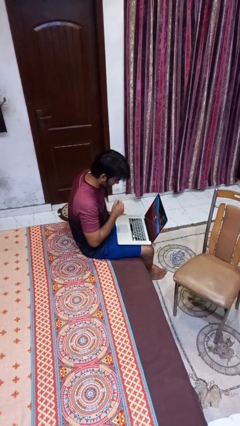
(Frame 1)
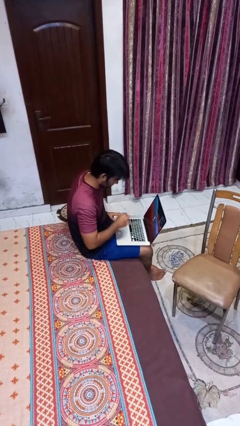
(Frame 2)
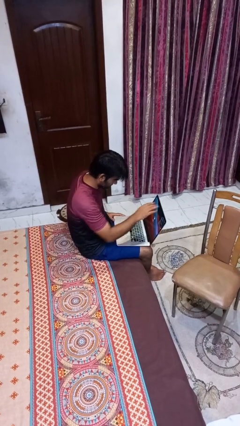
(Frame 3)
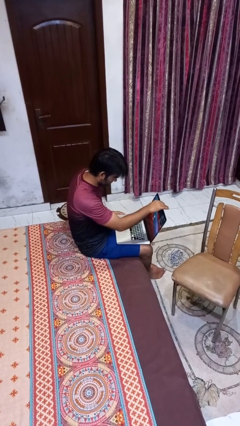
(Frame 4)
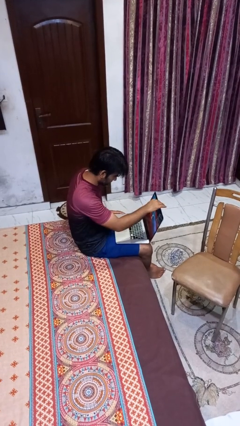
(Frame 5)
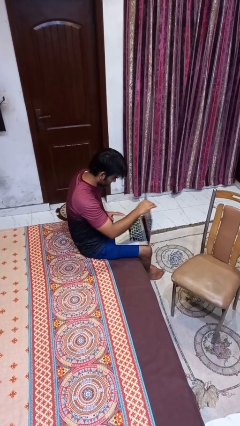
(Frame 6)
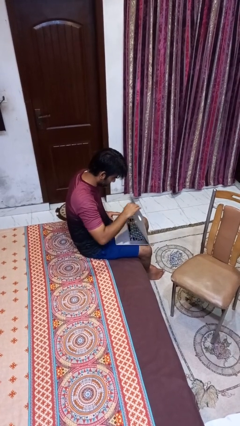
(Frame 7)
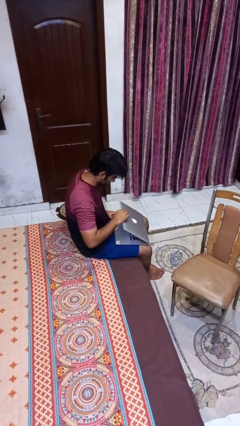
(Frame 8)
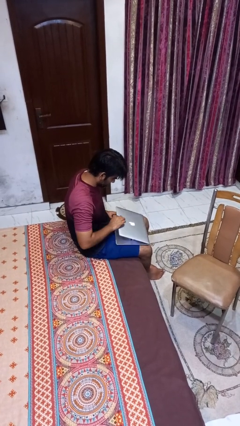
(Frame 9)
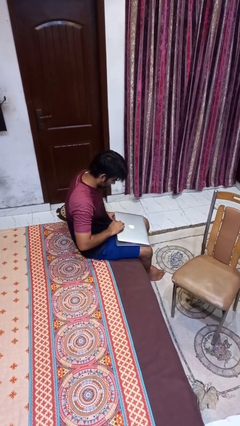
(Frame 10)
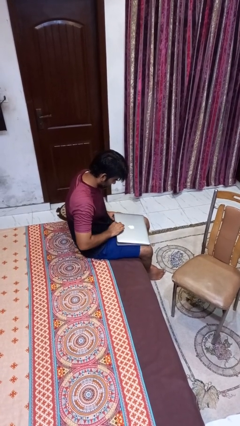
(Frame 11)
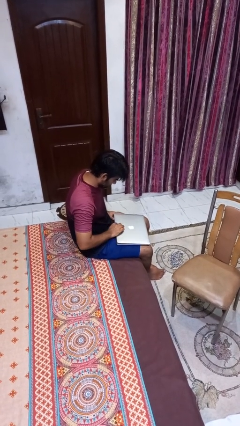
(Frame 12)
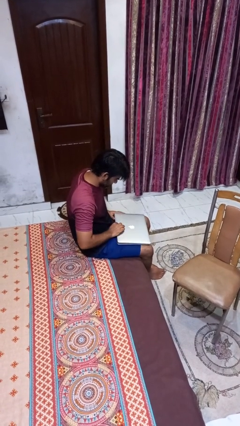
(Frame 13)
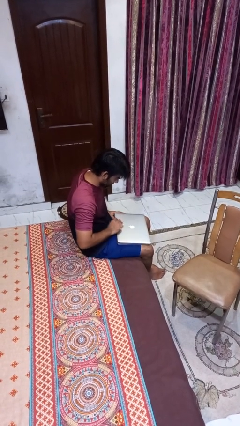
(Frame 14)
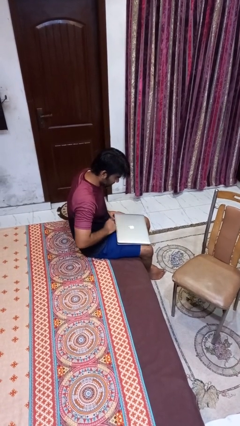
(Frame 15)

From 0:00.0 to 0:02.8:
person closes laptop

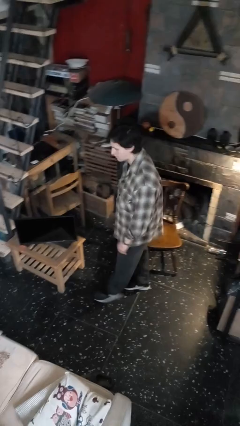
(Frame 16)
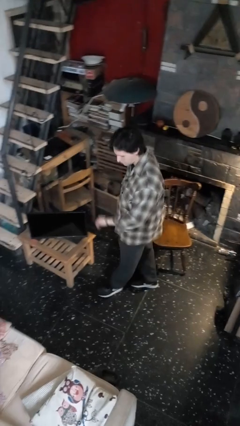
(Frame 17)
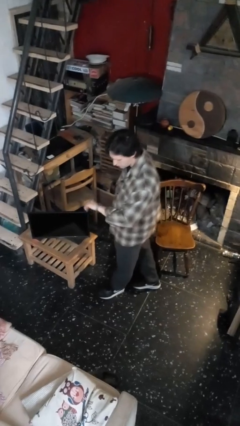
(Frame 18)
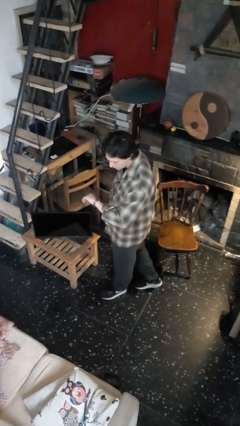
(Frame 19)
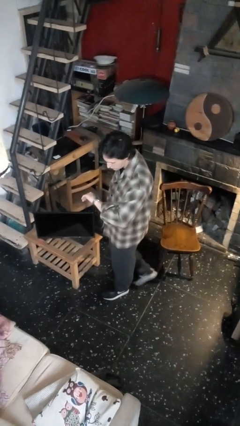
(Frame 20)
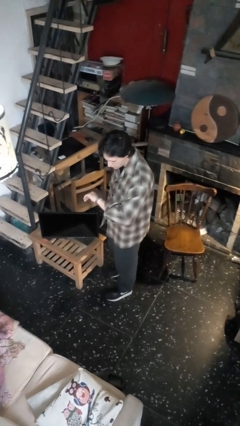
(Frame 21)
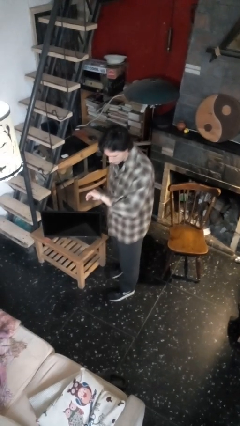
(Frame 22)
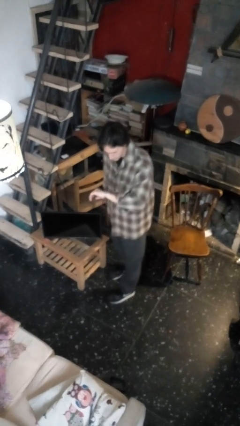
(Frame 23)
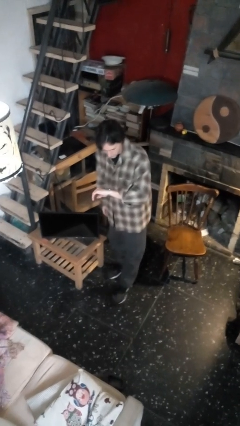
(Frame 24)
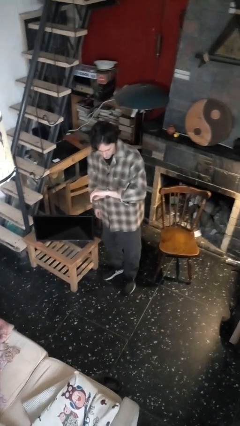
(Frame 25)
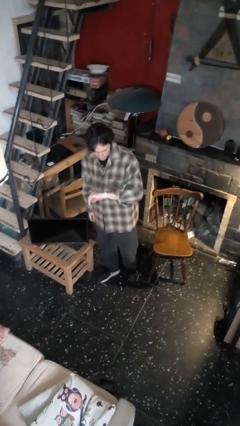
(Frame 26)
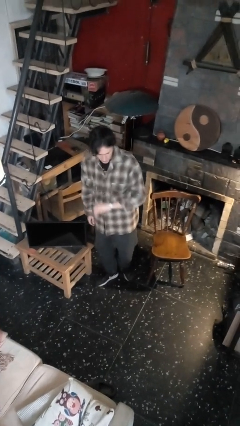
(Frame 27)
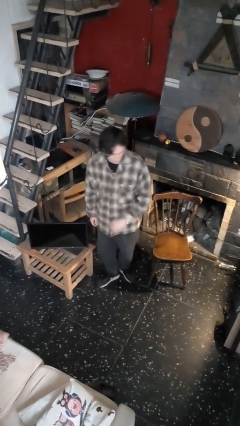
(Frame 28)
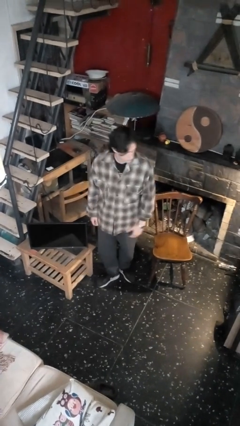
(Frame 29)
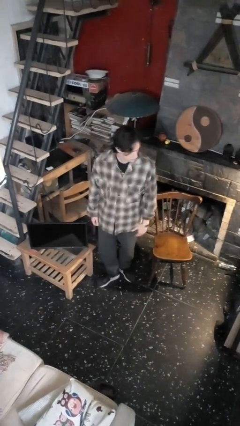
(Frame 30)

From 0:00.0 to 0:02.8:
person looks at wristwatch

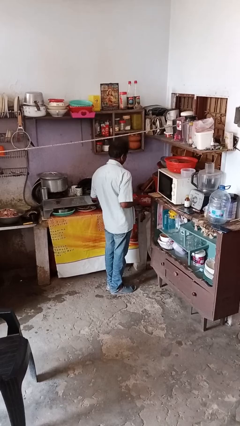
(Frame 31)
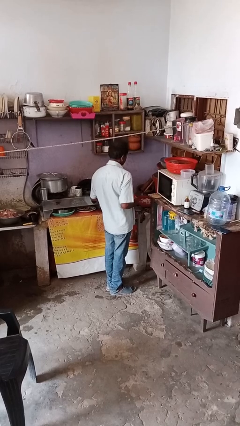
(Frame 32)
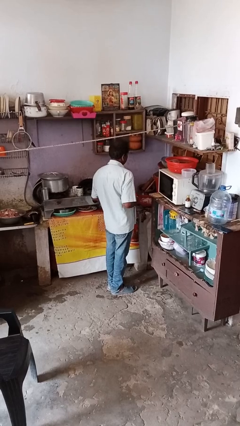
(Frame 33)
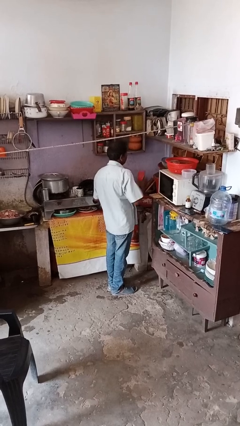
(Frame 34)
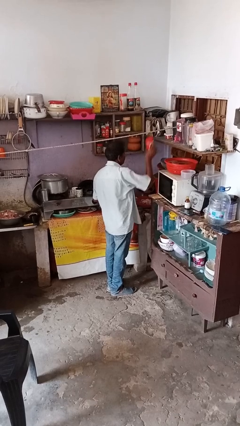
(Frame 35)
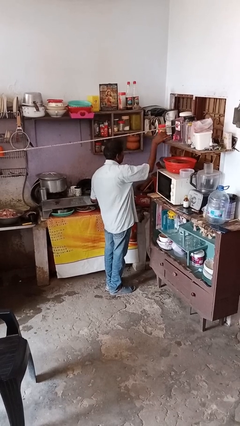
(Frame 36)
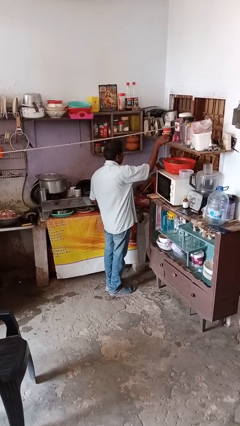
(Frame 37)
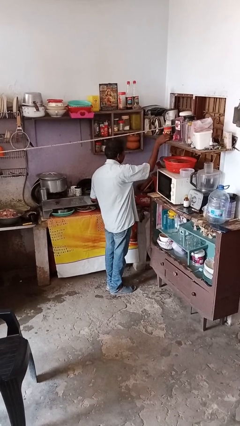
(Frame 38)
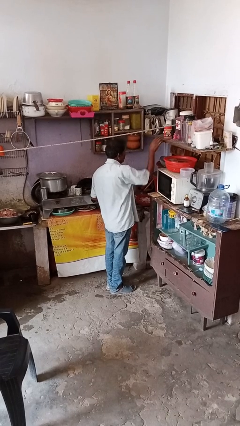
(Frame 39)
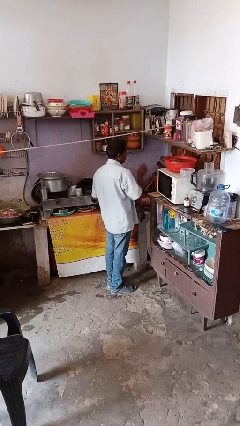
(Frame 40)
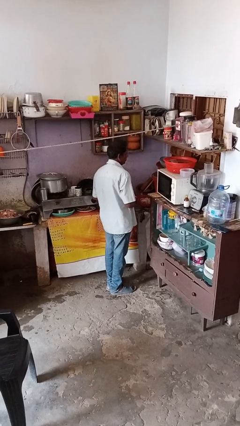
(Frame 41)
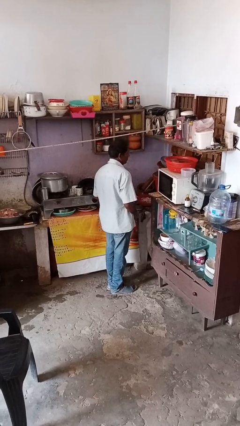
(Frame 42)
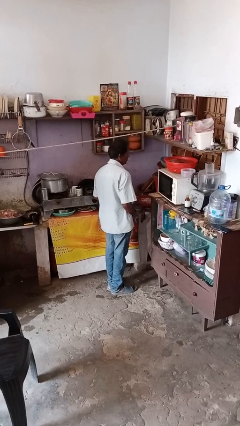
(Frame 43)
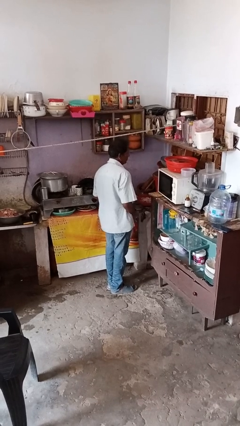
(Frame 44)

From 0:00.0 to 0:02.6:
person puts down object on shelf

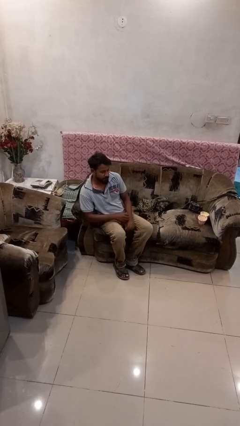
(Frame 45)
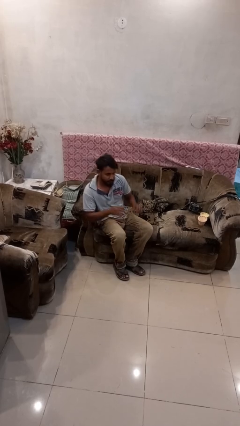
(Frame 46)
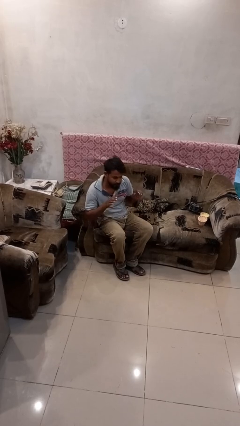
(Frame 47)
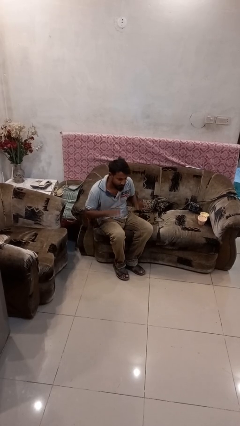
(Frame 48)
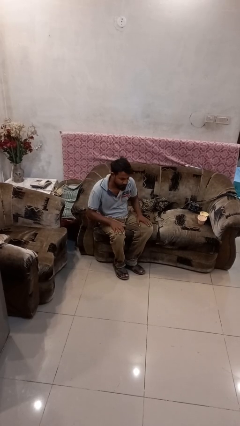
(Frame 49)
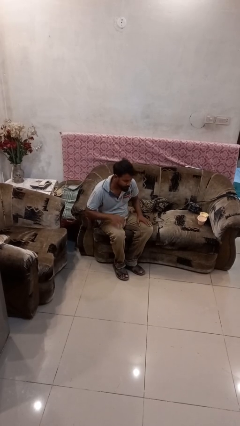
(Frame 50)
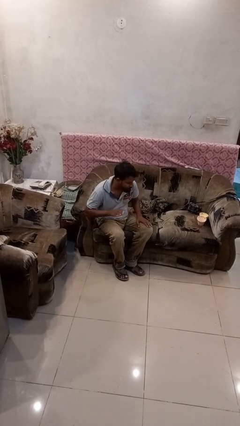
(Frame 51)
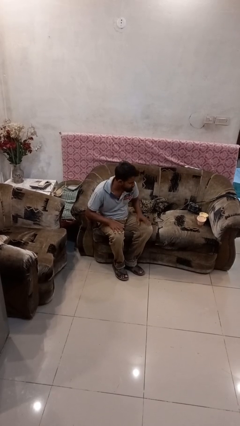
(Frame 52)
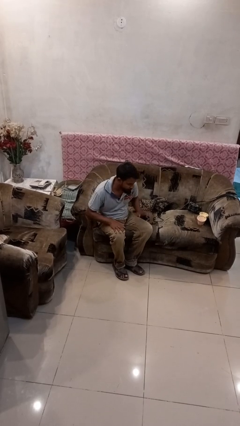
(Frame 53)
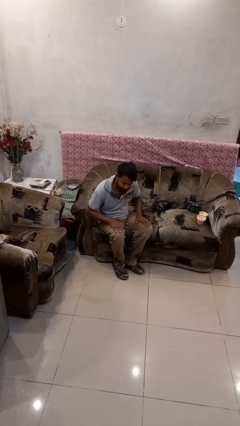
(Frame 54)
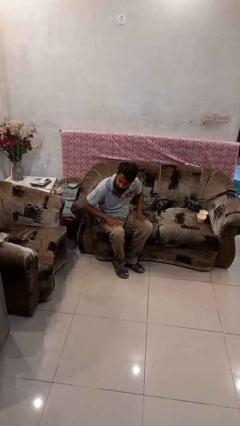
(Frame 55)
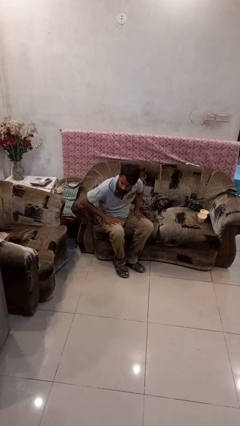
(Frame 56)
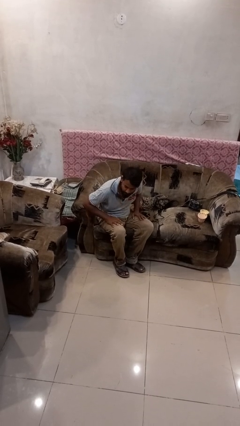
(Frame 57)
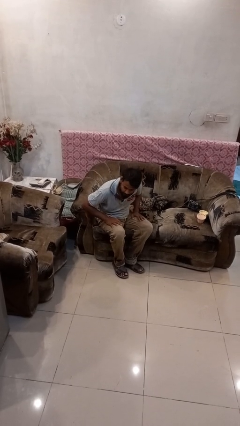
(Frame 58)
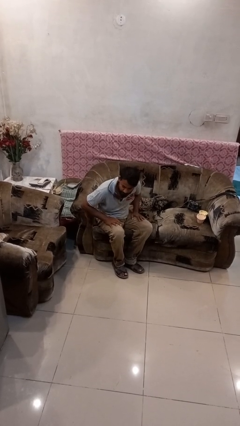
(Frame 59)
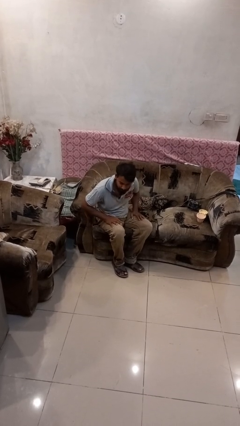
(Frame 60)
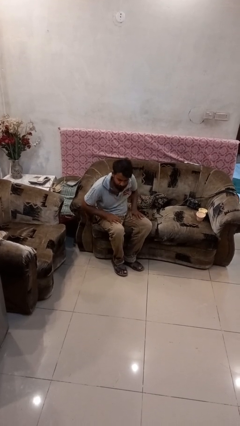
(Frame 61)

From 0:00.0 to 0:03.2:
person slaps hands on thighs

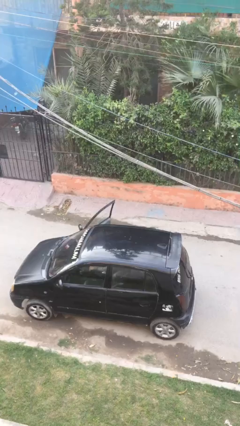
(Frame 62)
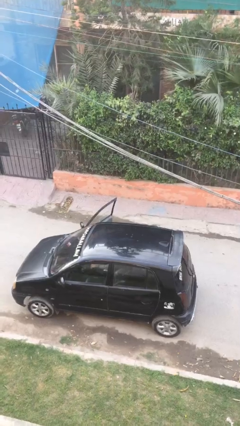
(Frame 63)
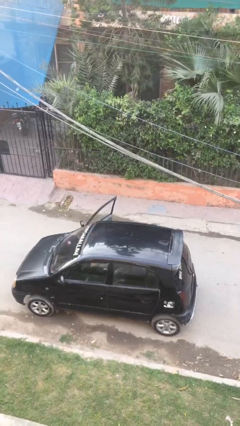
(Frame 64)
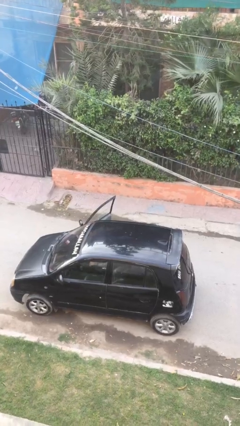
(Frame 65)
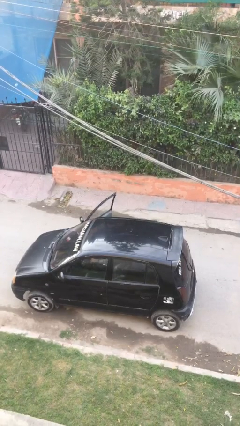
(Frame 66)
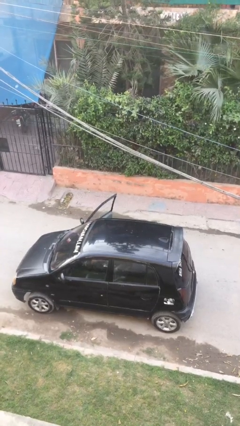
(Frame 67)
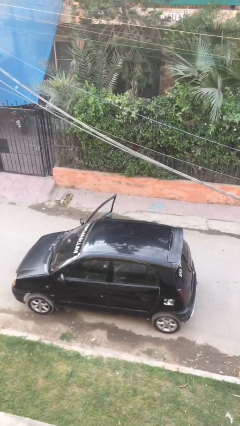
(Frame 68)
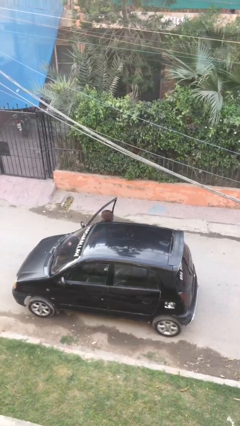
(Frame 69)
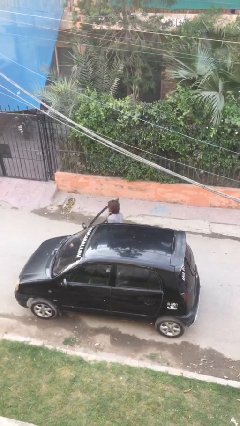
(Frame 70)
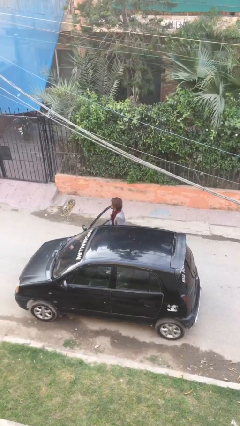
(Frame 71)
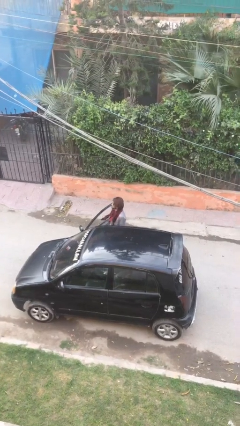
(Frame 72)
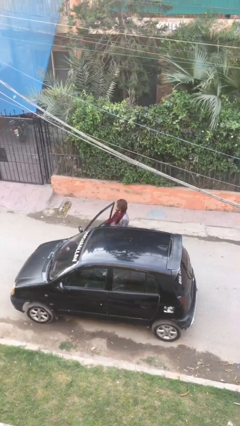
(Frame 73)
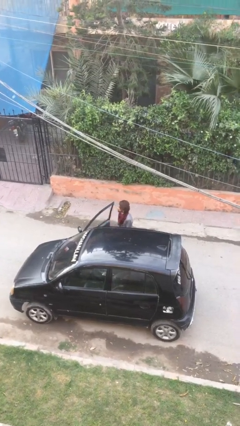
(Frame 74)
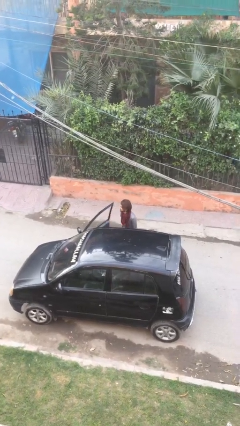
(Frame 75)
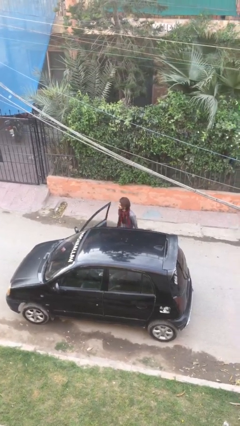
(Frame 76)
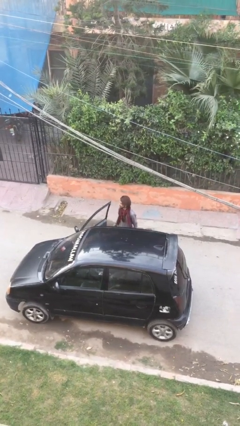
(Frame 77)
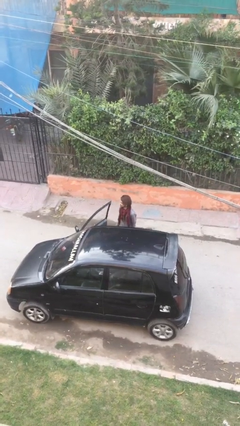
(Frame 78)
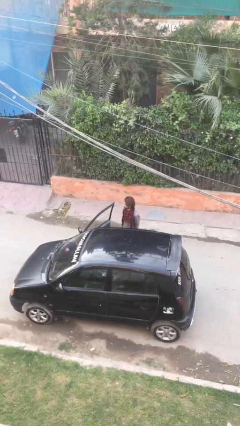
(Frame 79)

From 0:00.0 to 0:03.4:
person exits car

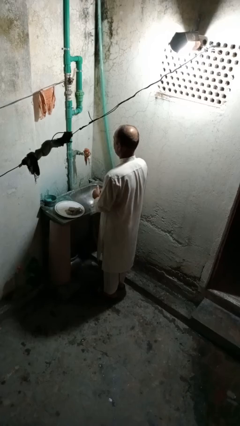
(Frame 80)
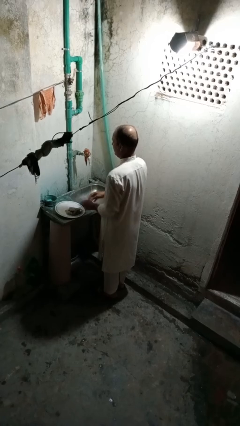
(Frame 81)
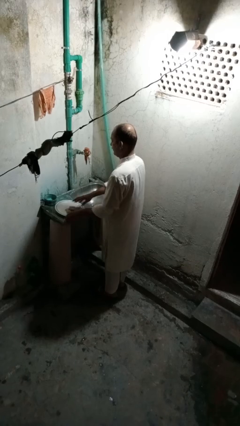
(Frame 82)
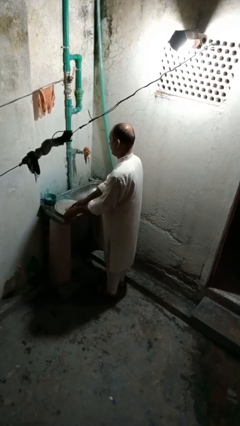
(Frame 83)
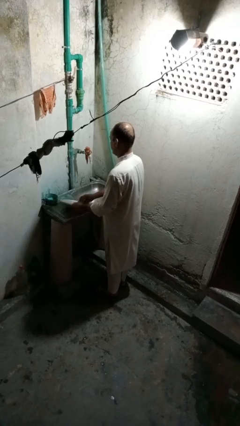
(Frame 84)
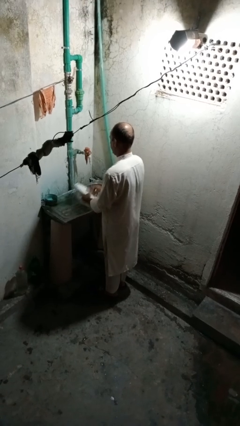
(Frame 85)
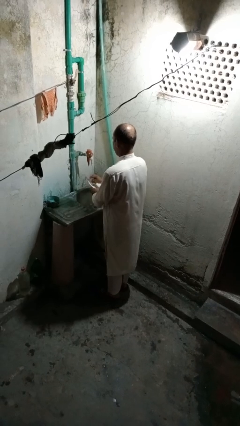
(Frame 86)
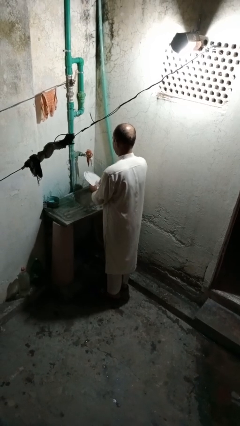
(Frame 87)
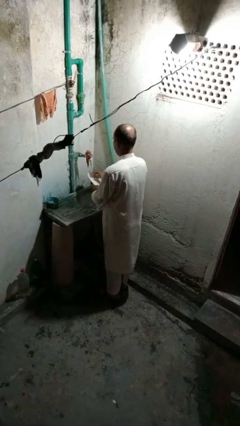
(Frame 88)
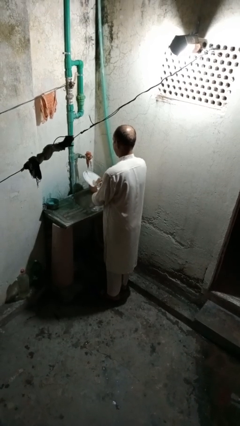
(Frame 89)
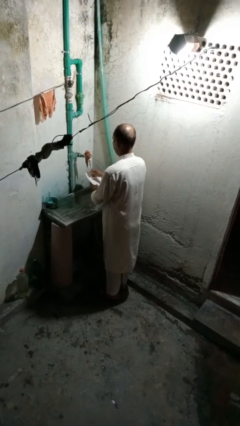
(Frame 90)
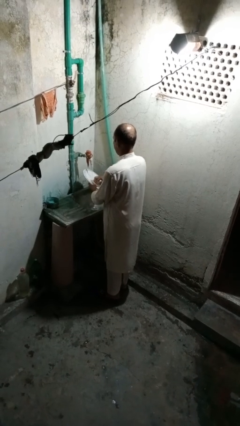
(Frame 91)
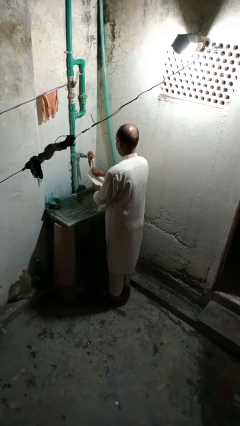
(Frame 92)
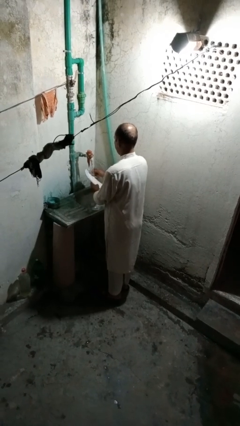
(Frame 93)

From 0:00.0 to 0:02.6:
person washes dish
